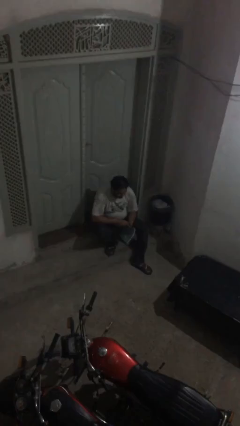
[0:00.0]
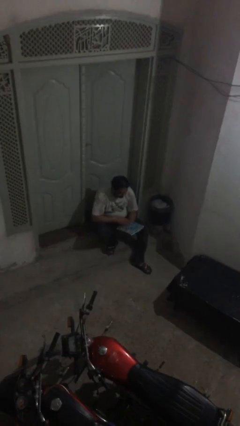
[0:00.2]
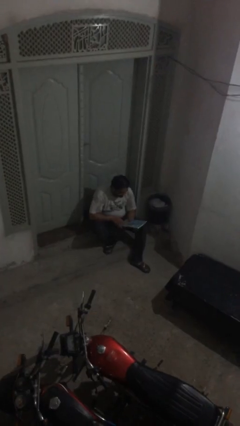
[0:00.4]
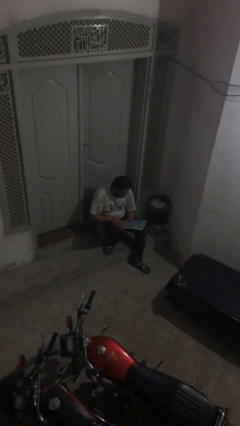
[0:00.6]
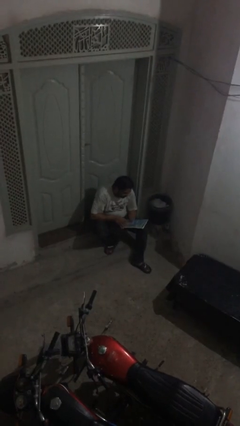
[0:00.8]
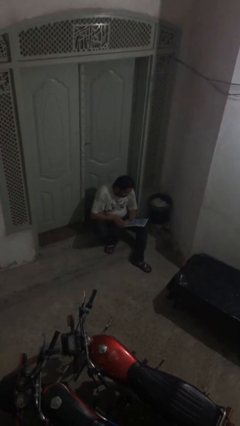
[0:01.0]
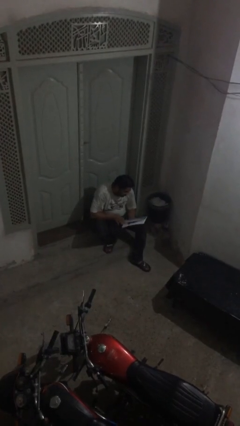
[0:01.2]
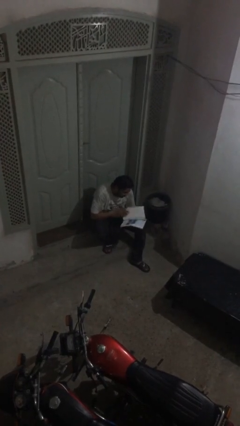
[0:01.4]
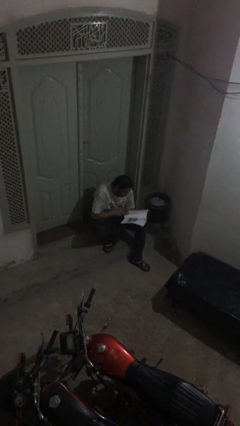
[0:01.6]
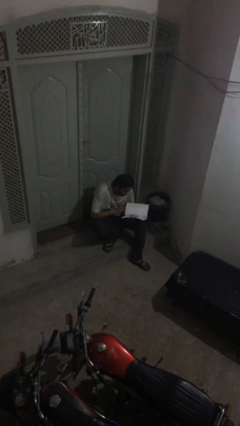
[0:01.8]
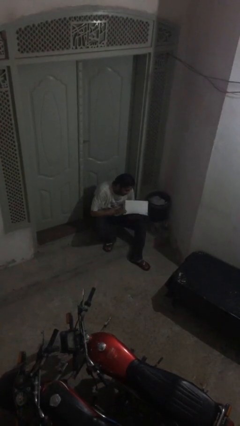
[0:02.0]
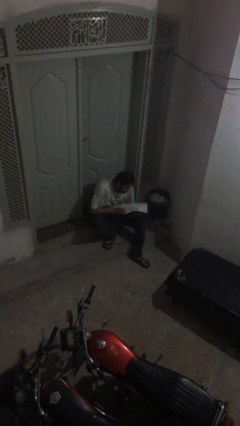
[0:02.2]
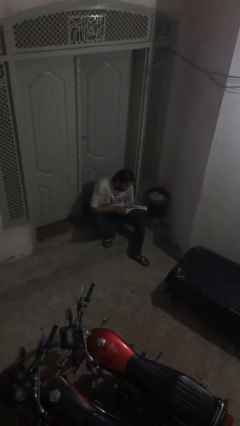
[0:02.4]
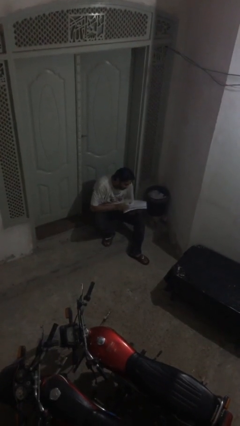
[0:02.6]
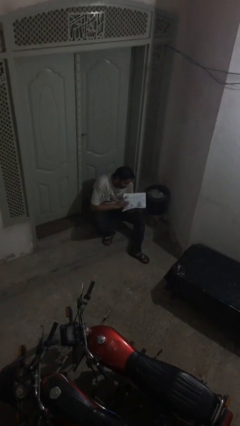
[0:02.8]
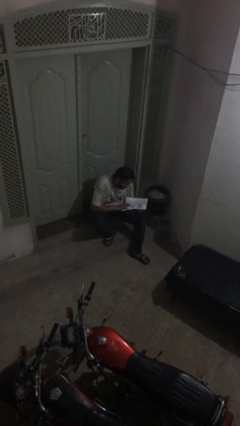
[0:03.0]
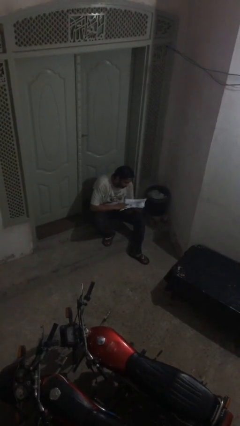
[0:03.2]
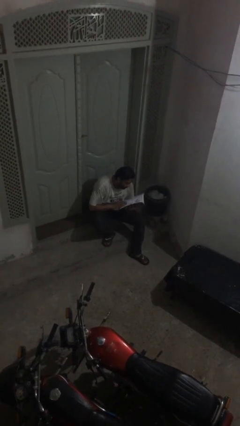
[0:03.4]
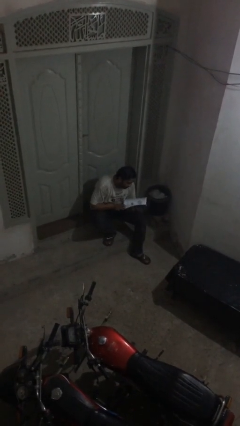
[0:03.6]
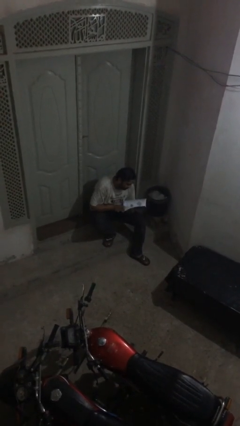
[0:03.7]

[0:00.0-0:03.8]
person reads document

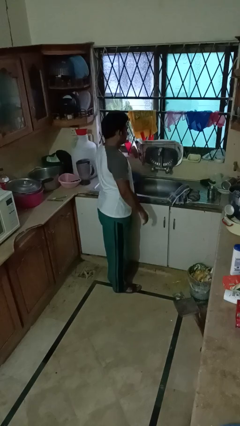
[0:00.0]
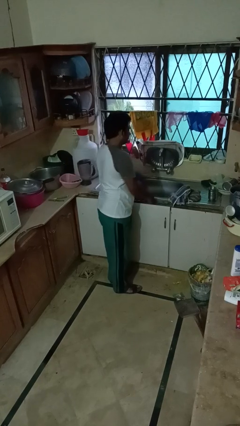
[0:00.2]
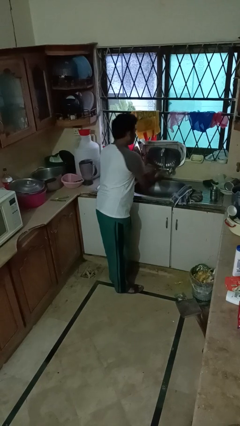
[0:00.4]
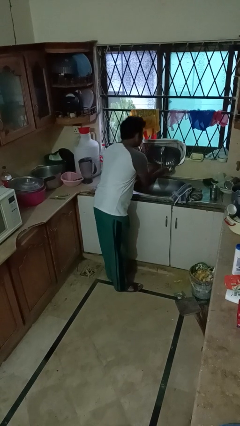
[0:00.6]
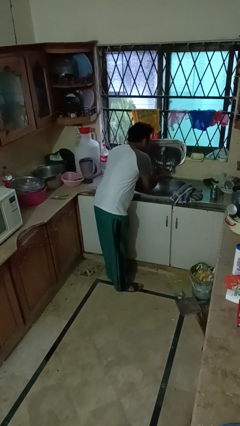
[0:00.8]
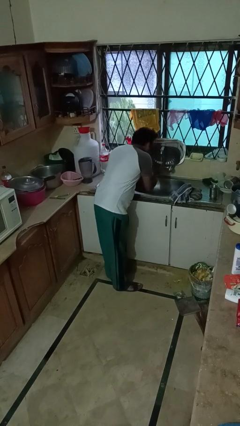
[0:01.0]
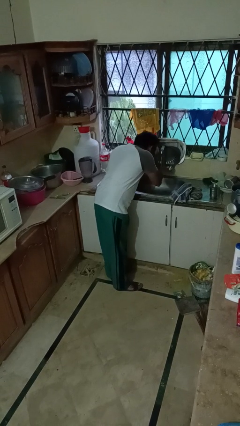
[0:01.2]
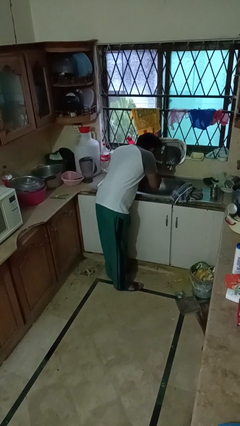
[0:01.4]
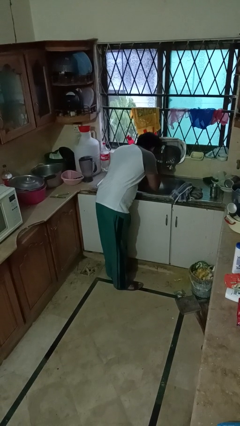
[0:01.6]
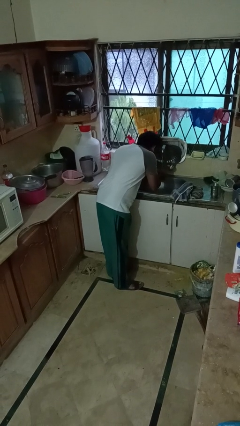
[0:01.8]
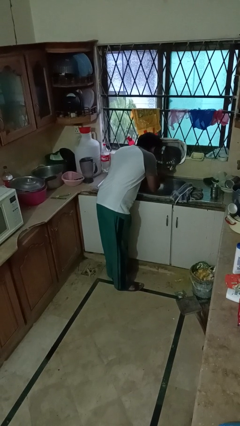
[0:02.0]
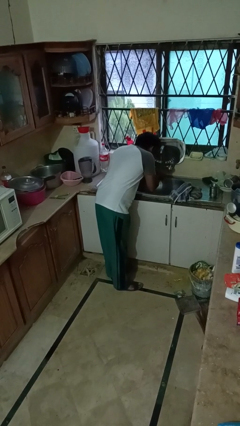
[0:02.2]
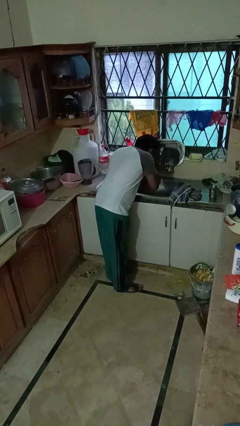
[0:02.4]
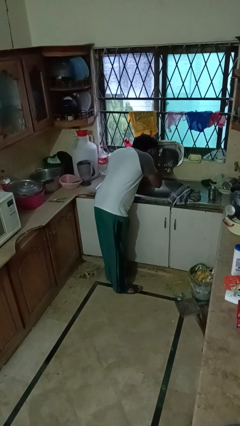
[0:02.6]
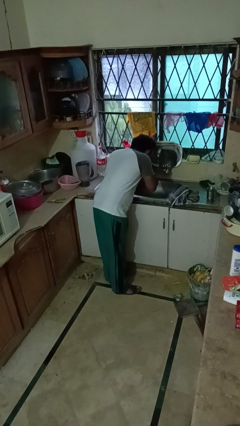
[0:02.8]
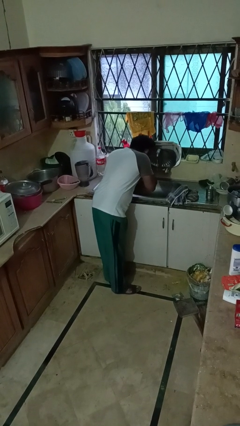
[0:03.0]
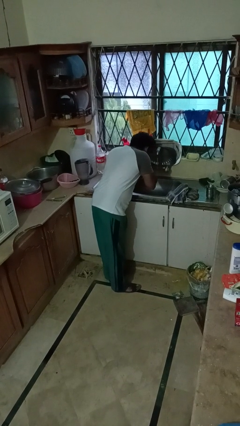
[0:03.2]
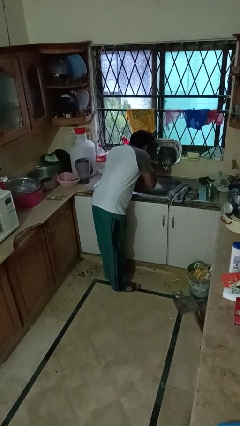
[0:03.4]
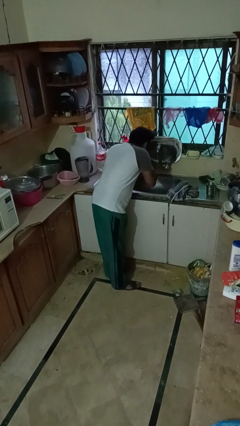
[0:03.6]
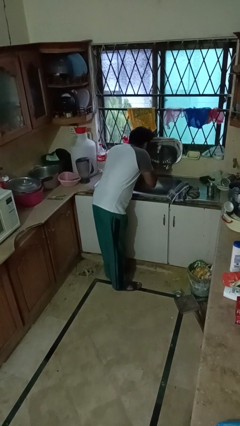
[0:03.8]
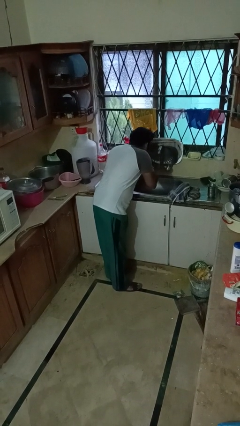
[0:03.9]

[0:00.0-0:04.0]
person washes face

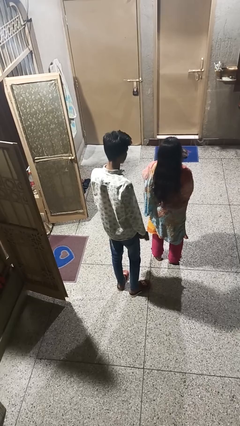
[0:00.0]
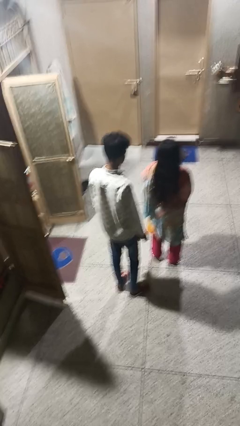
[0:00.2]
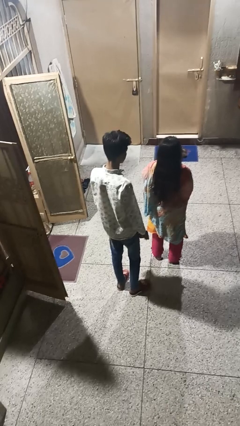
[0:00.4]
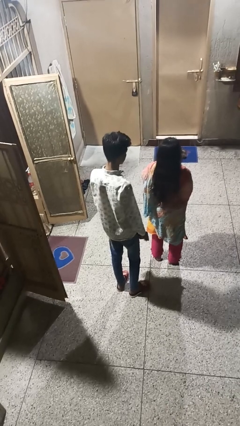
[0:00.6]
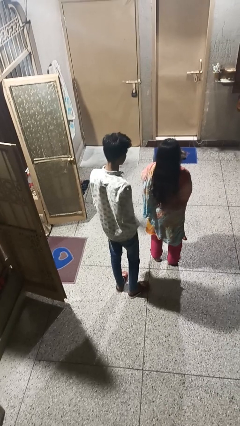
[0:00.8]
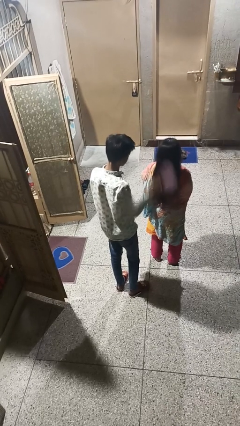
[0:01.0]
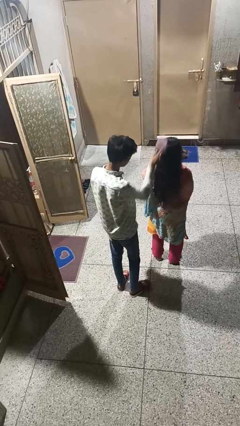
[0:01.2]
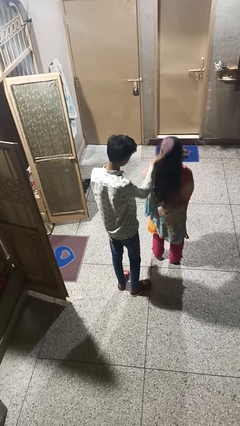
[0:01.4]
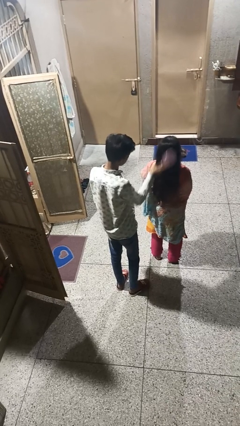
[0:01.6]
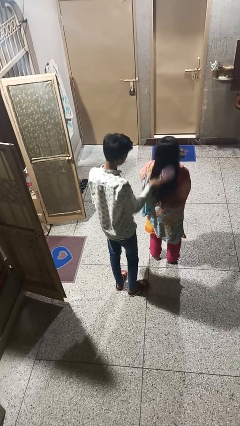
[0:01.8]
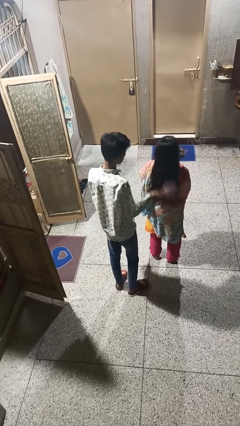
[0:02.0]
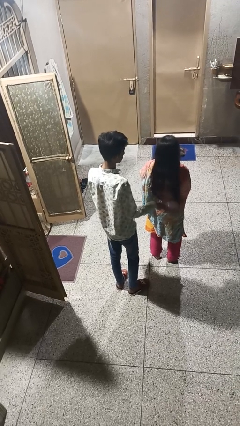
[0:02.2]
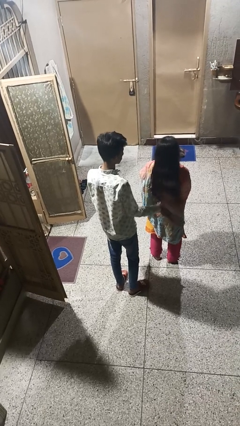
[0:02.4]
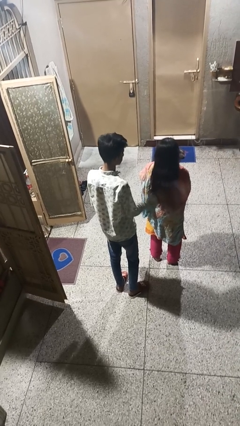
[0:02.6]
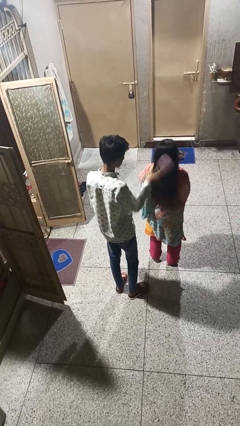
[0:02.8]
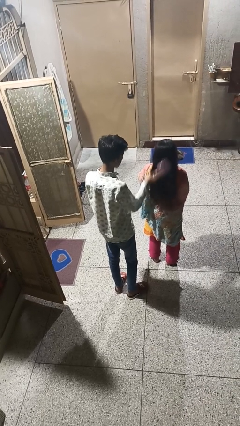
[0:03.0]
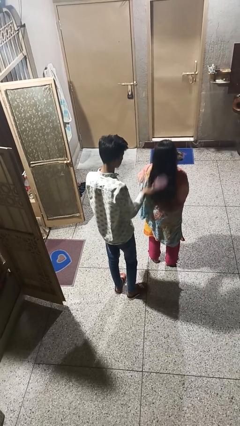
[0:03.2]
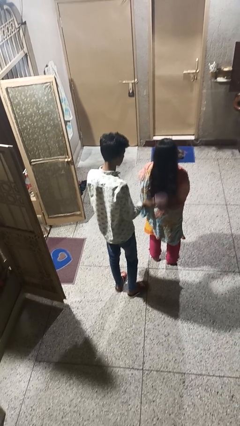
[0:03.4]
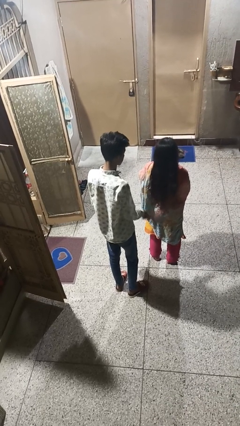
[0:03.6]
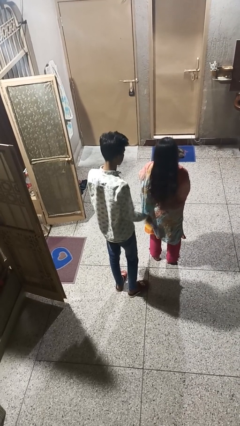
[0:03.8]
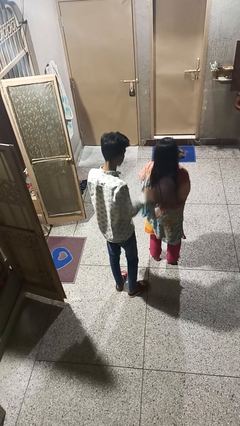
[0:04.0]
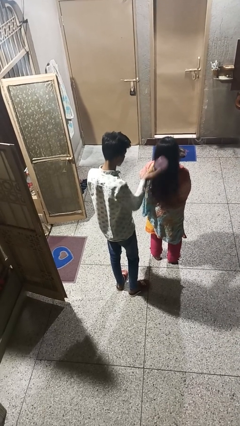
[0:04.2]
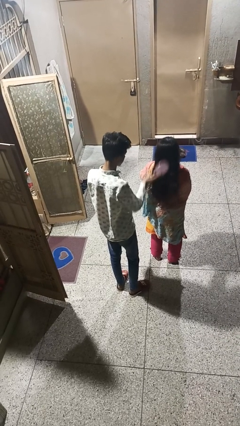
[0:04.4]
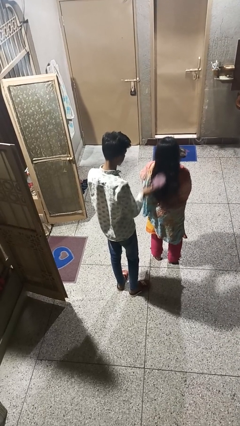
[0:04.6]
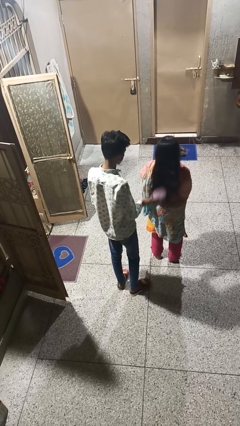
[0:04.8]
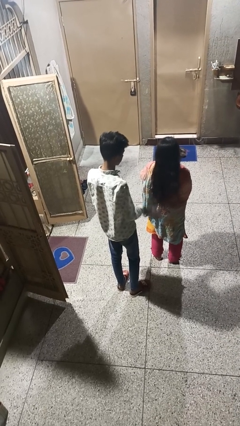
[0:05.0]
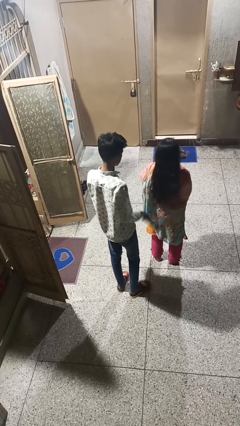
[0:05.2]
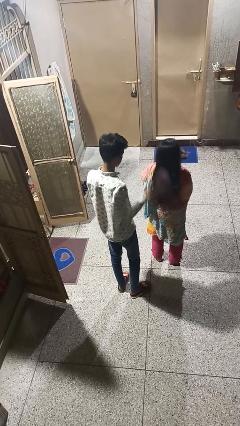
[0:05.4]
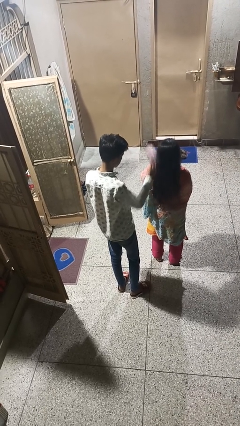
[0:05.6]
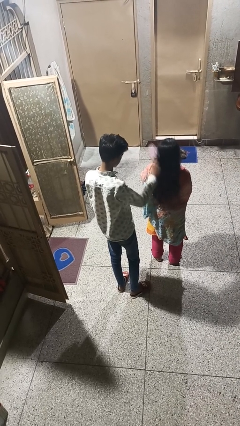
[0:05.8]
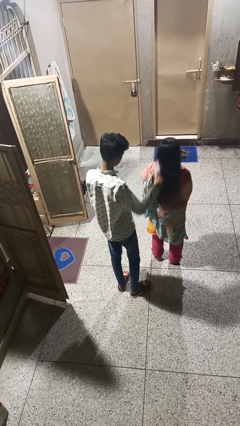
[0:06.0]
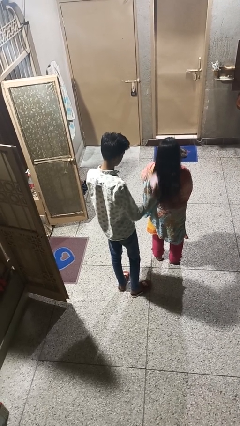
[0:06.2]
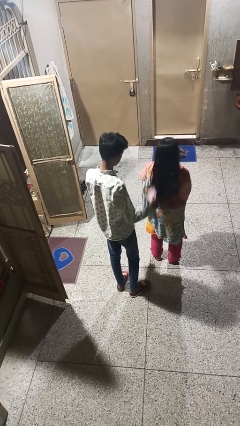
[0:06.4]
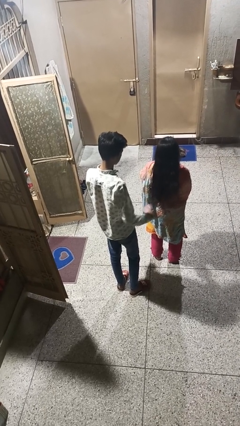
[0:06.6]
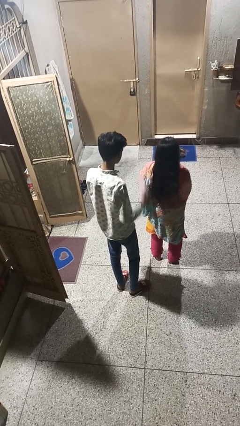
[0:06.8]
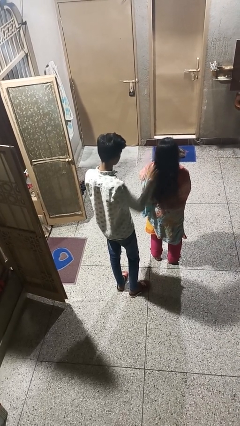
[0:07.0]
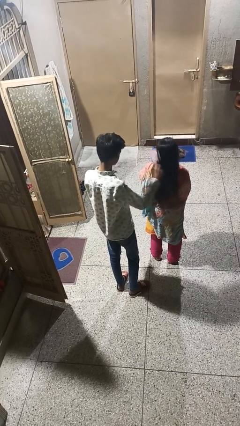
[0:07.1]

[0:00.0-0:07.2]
person brushes hair of person

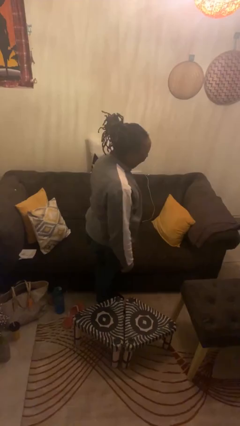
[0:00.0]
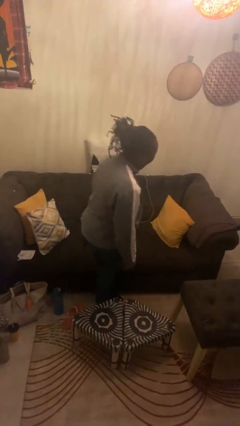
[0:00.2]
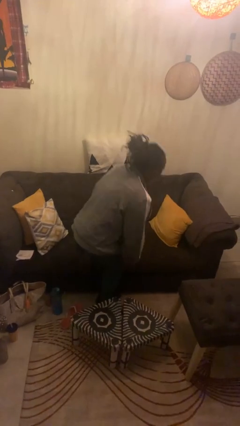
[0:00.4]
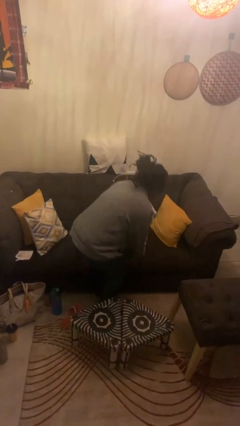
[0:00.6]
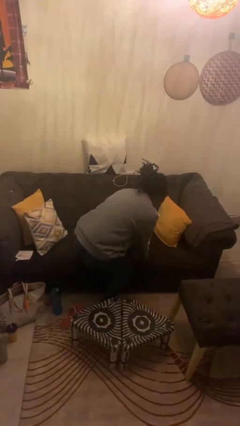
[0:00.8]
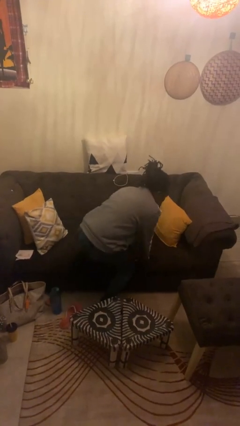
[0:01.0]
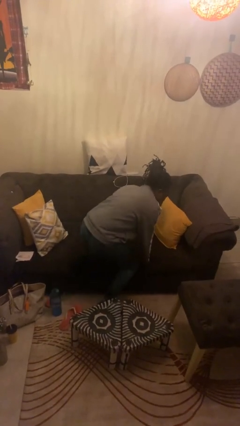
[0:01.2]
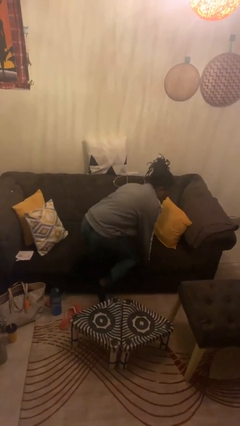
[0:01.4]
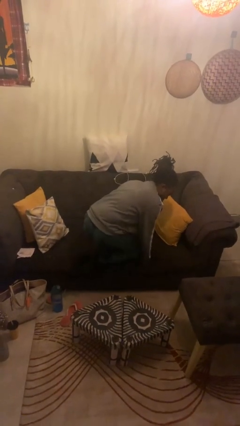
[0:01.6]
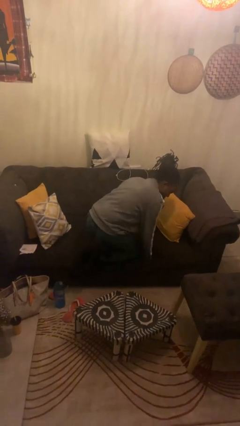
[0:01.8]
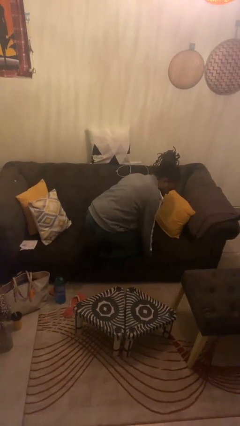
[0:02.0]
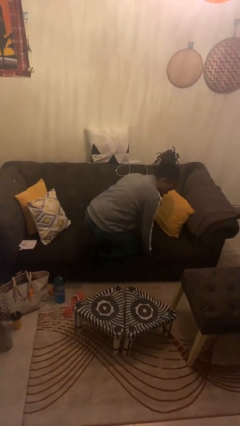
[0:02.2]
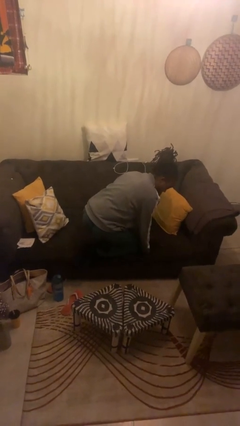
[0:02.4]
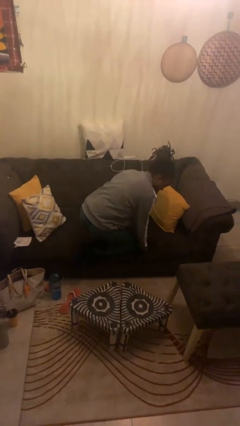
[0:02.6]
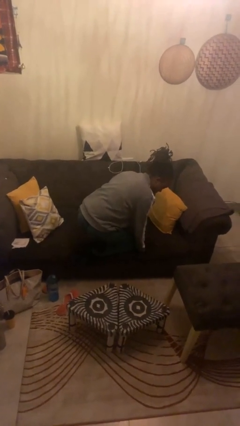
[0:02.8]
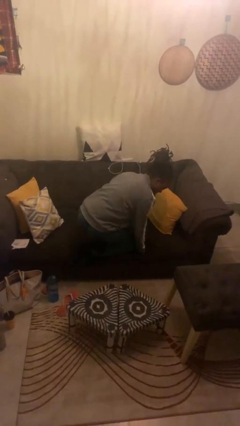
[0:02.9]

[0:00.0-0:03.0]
person climbs on couch
